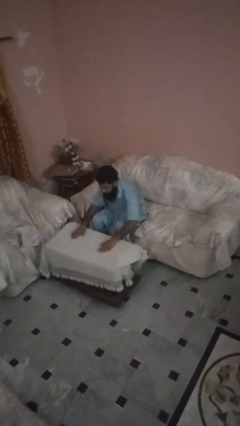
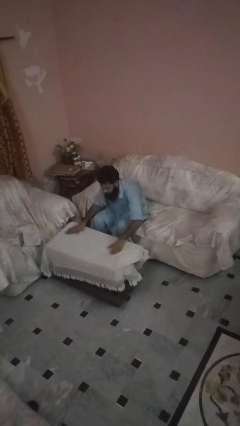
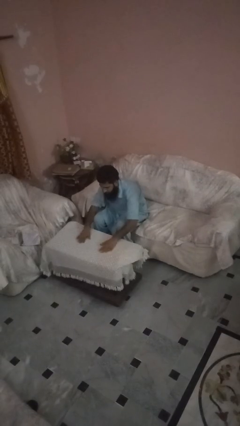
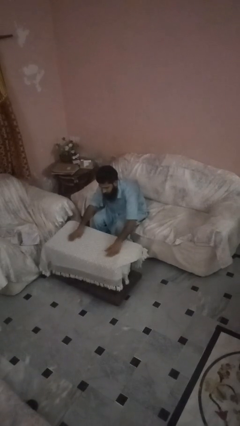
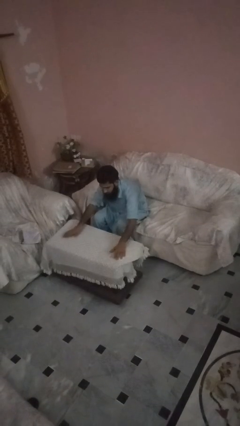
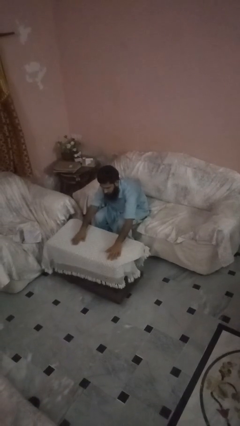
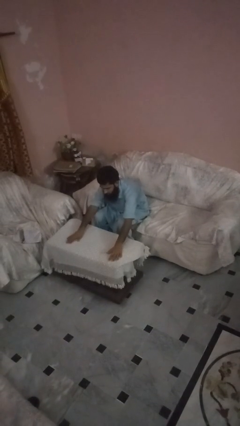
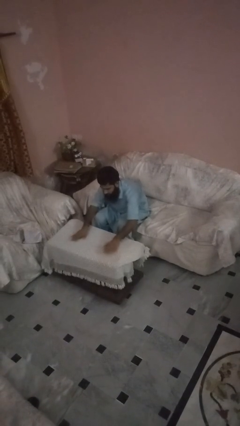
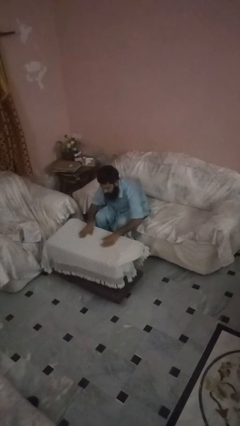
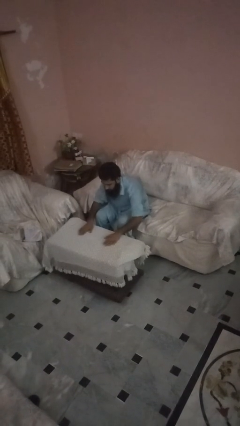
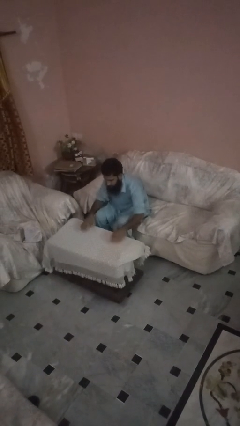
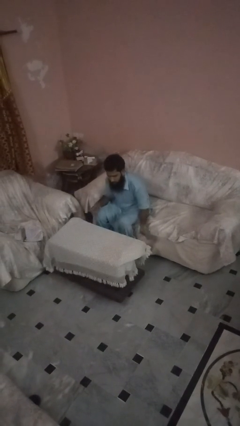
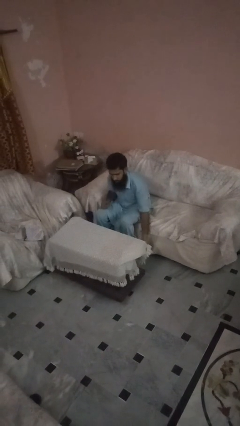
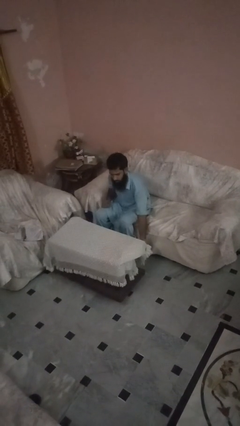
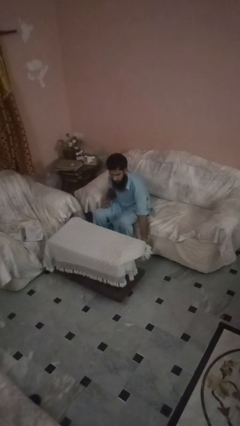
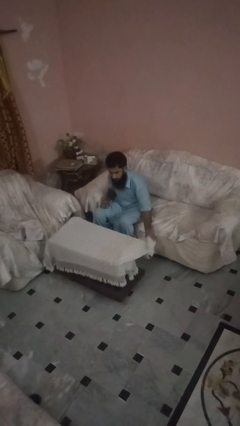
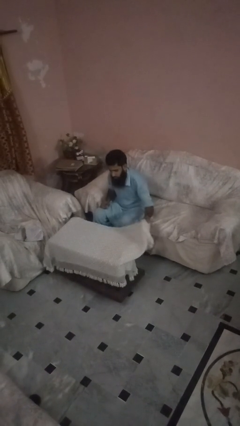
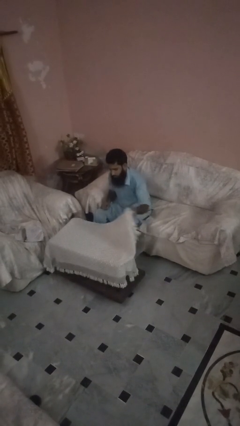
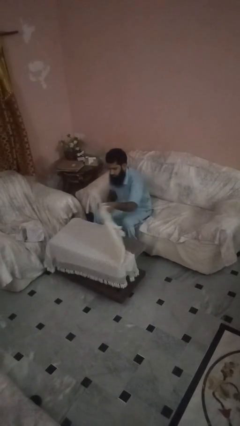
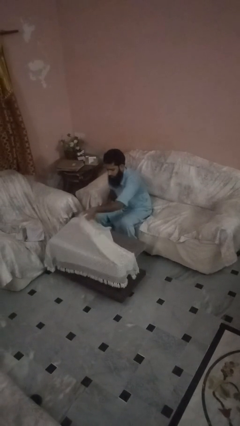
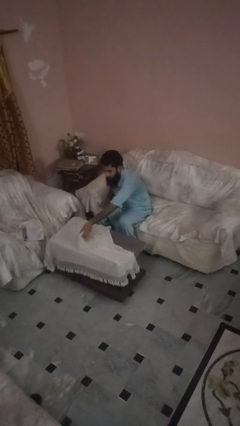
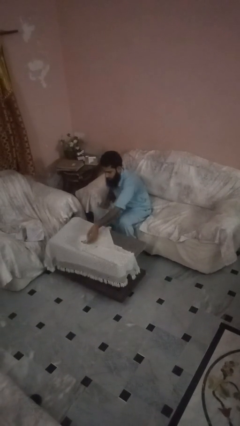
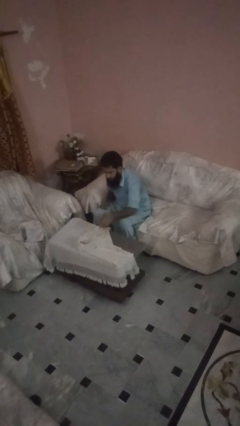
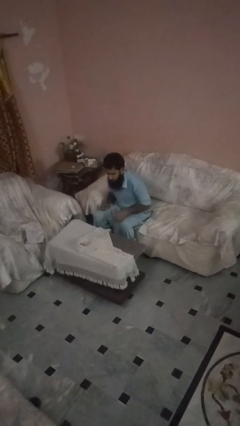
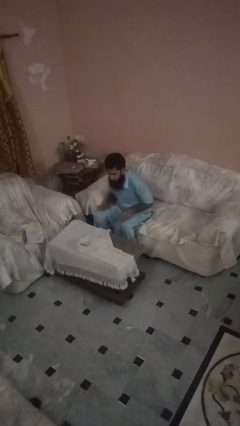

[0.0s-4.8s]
person folds tablecloth

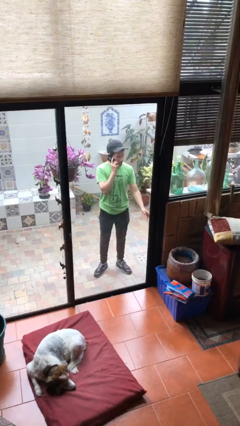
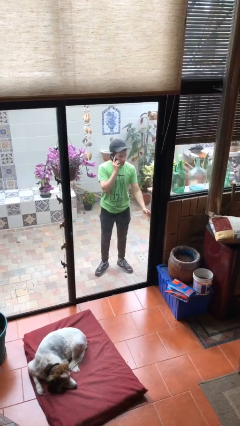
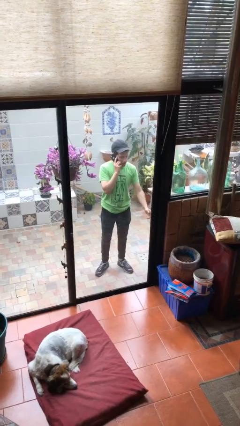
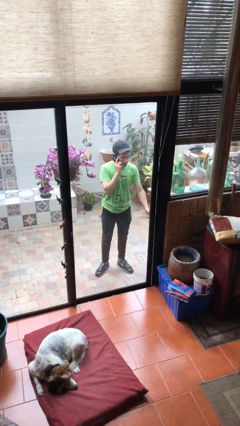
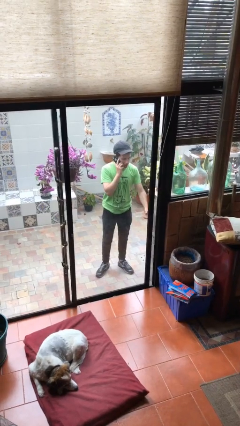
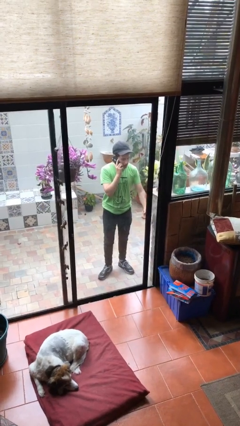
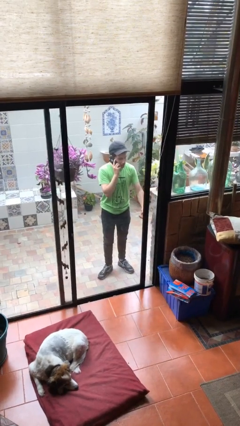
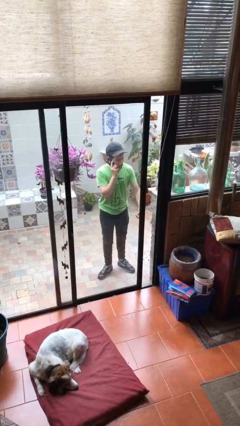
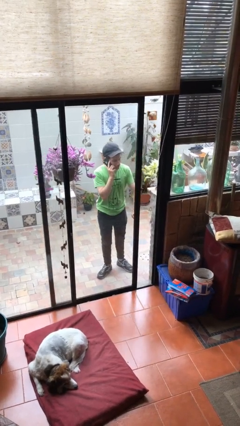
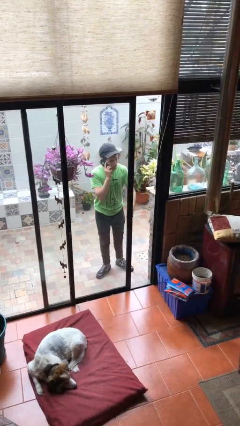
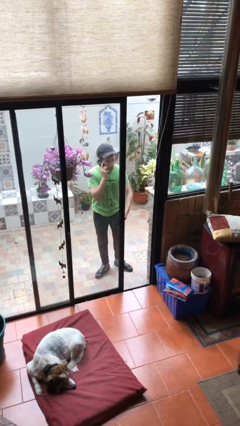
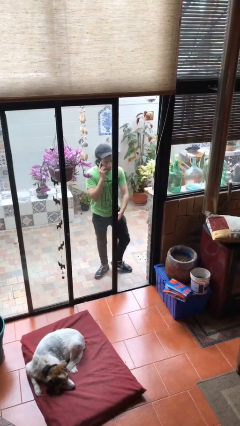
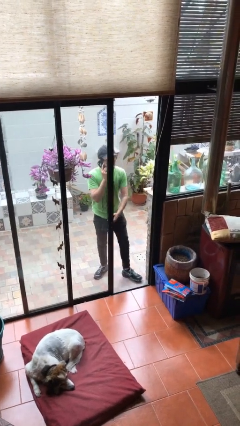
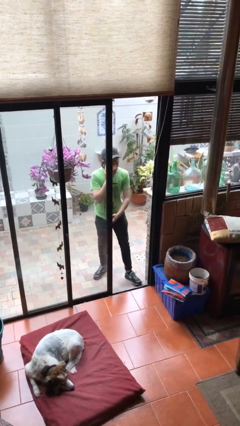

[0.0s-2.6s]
person opens facility door

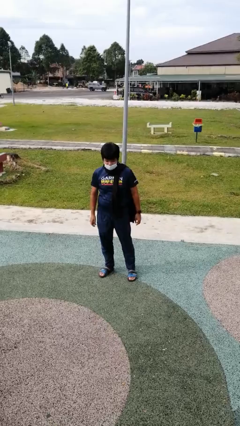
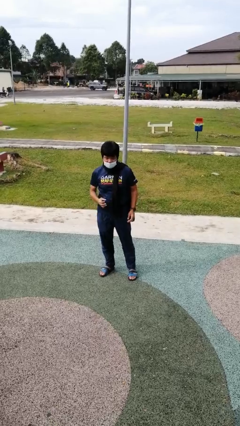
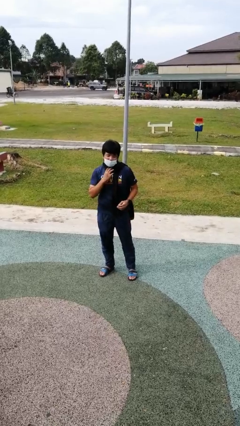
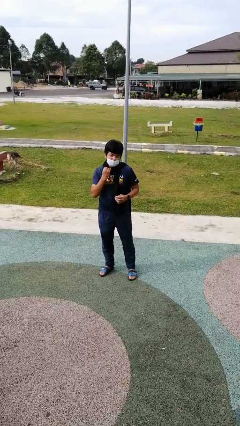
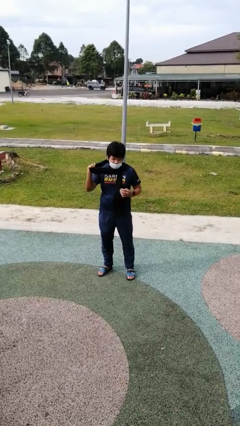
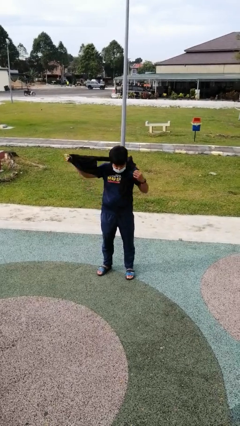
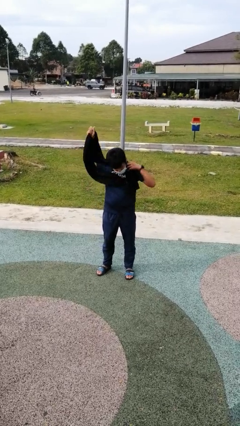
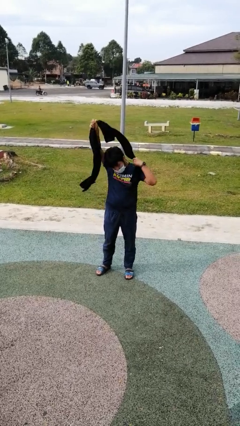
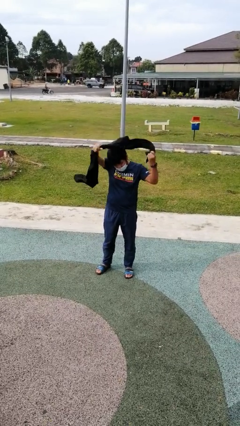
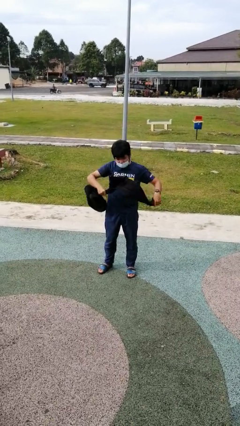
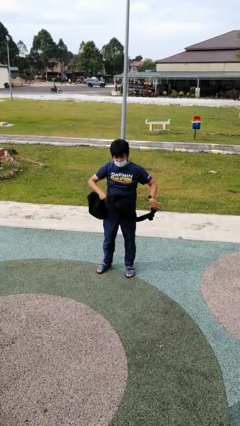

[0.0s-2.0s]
person takes off scarf

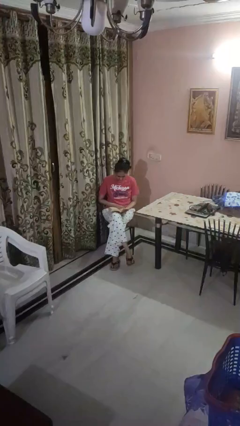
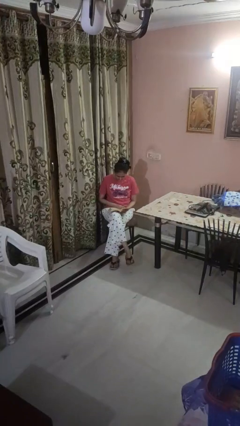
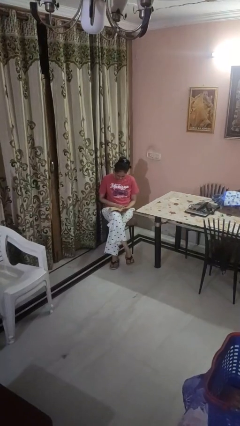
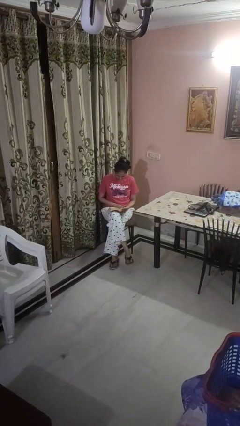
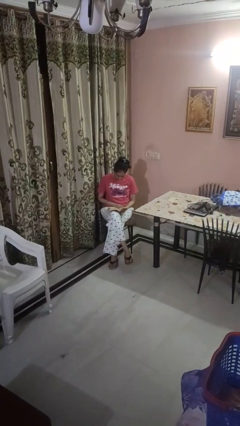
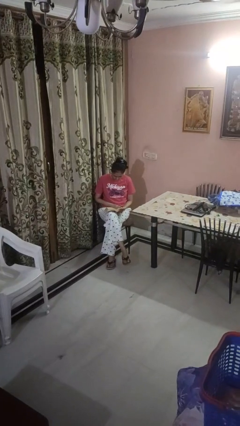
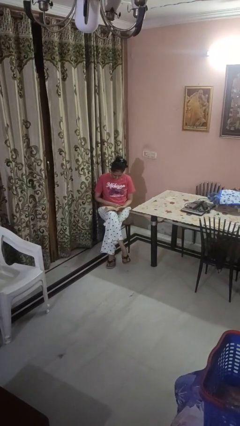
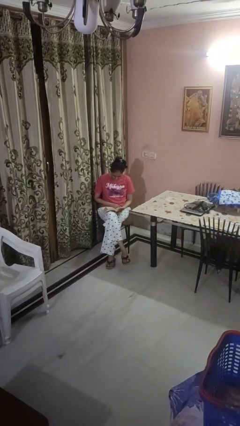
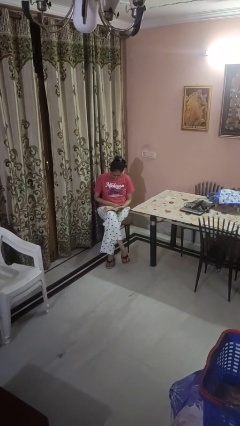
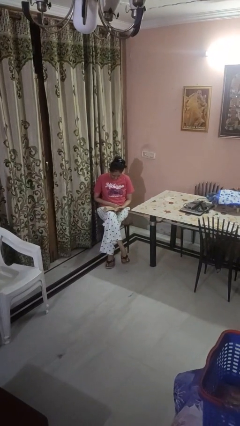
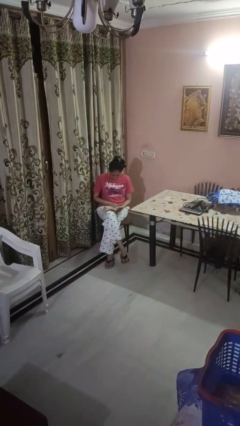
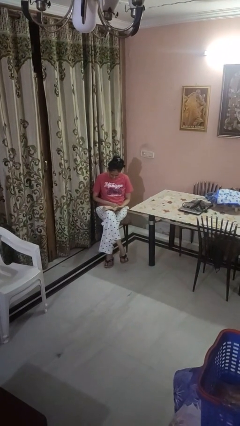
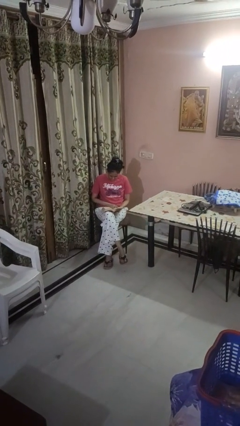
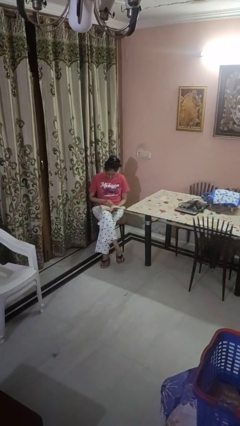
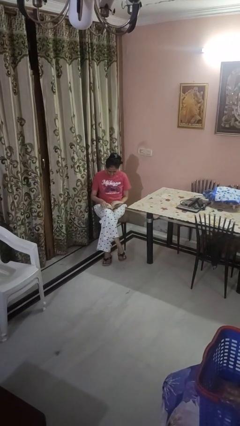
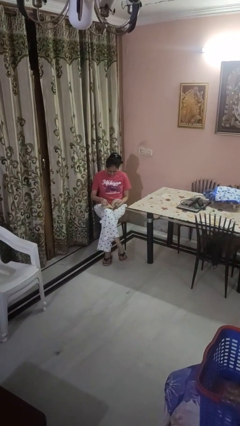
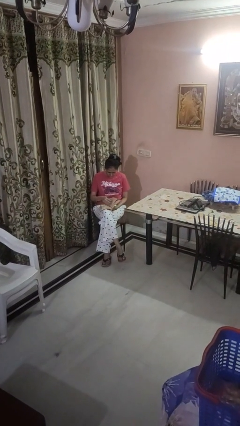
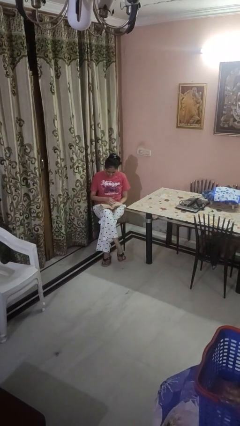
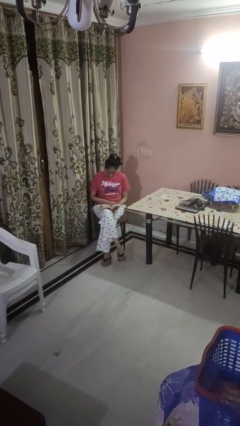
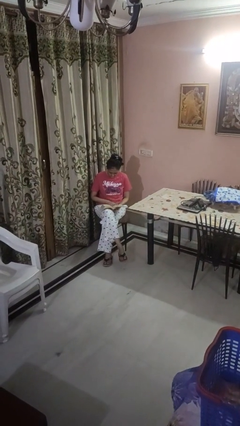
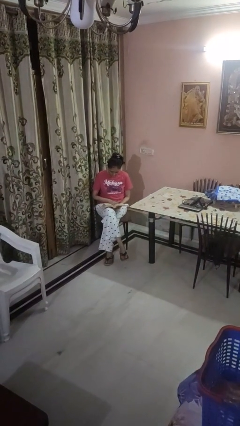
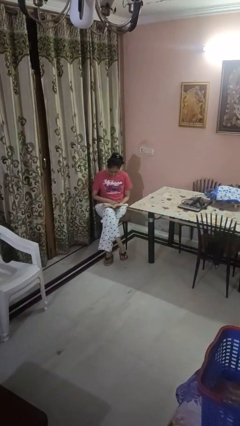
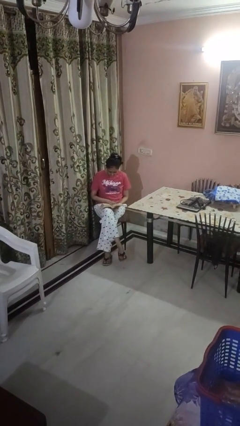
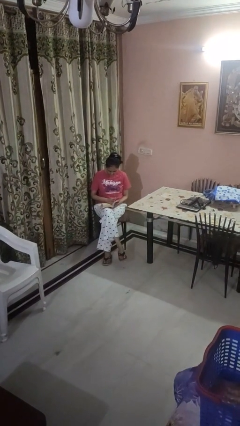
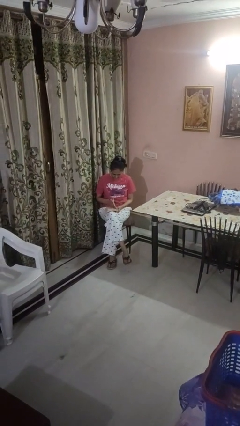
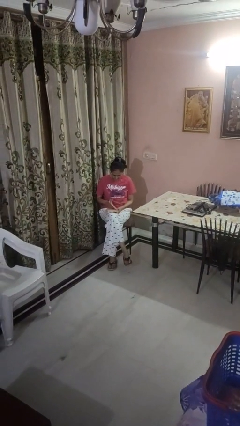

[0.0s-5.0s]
person reads book

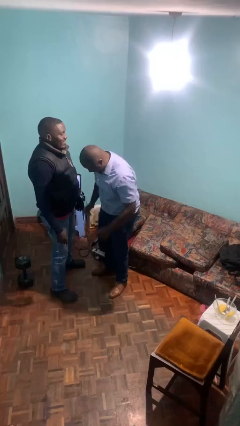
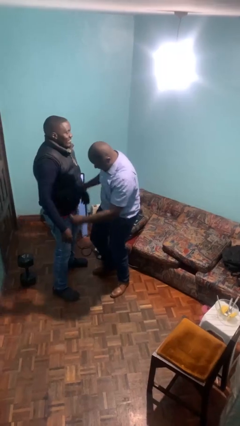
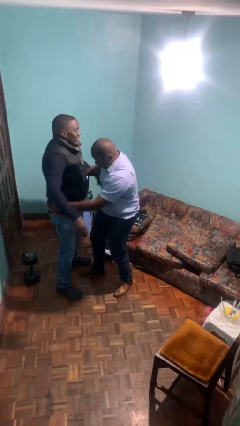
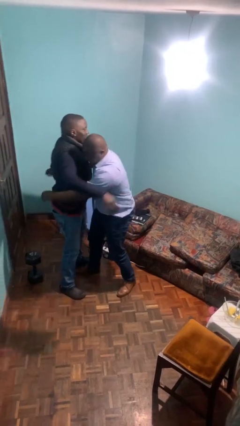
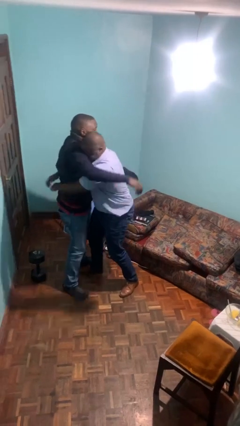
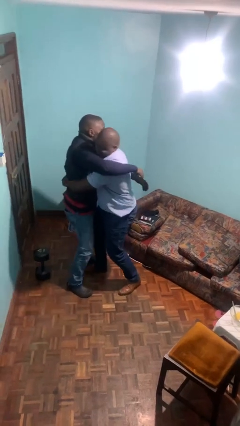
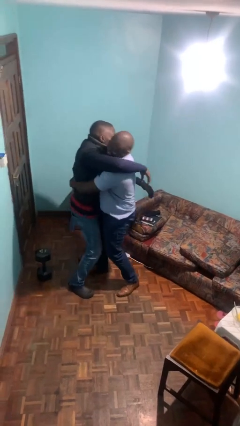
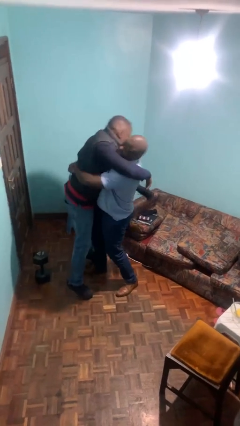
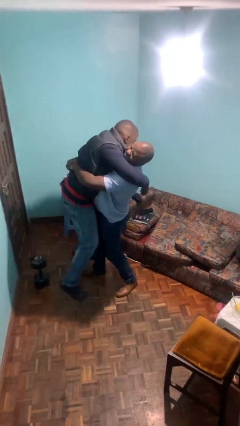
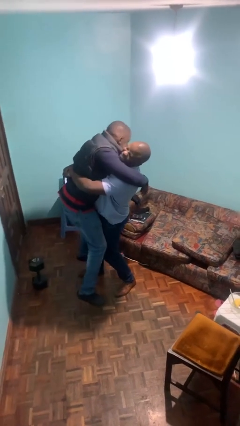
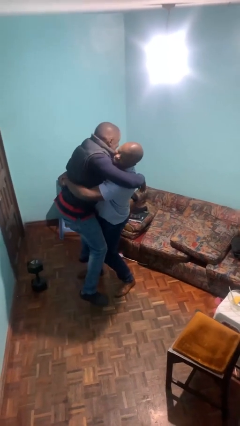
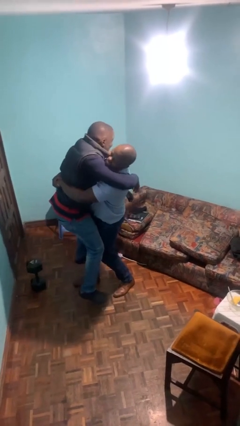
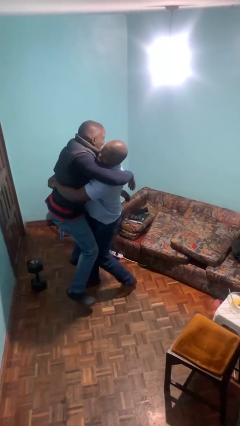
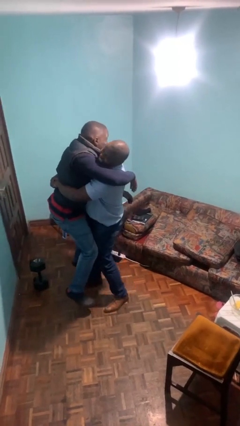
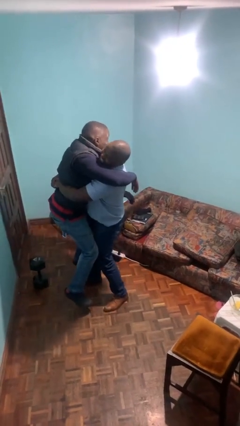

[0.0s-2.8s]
person picks up person

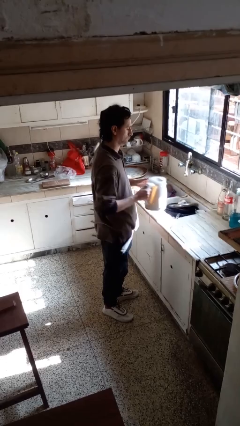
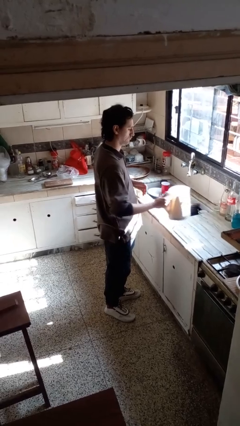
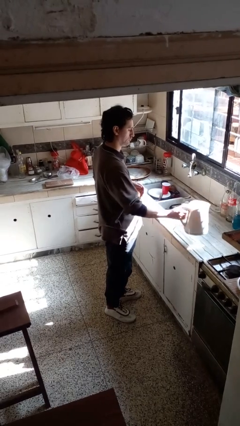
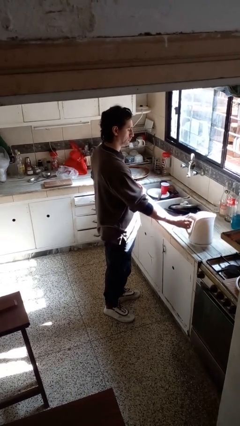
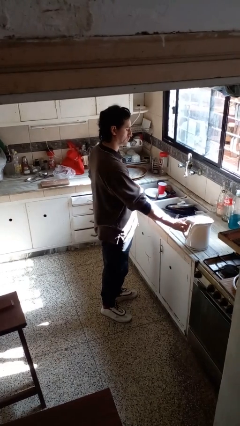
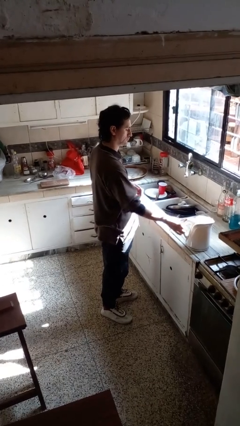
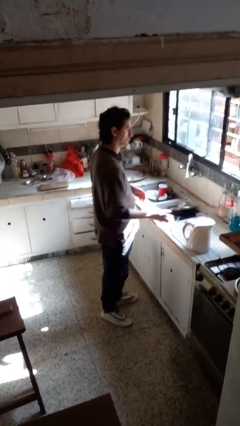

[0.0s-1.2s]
person puts down object on countertop
